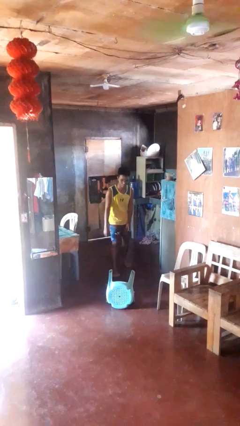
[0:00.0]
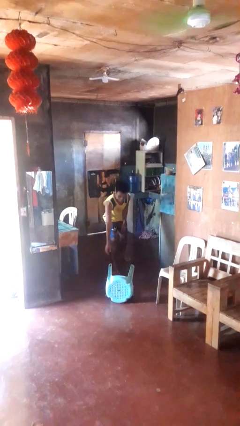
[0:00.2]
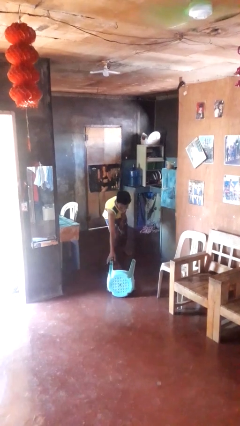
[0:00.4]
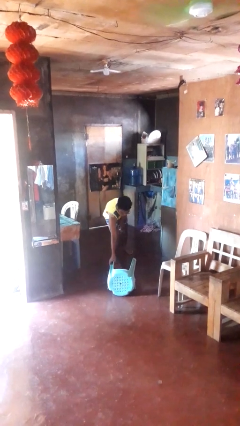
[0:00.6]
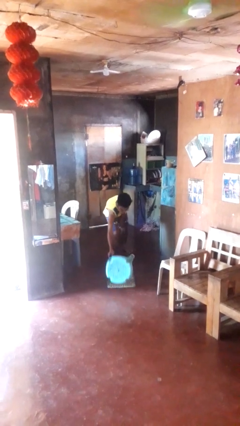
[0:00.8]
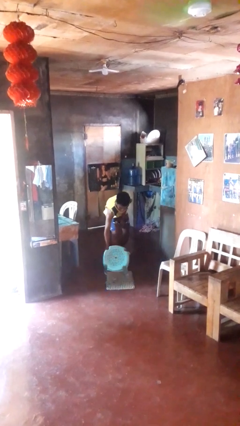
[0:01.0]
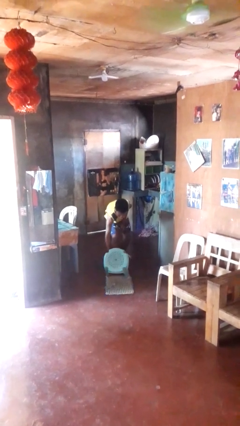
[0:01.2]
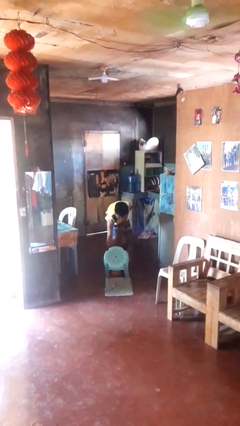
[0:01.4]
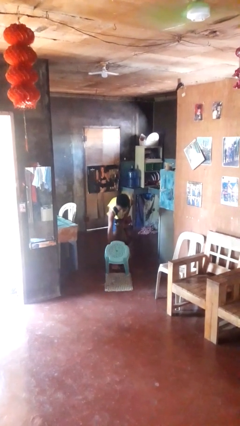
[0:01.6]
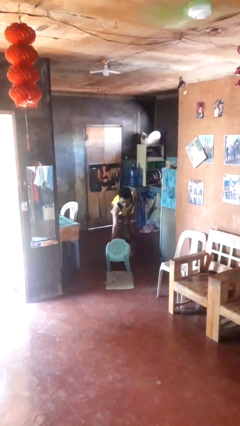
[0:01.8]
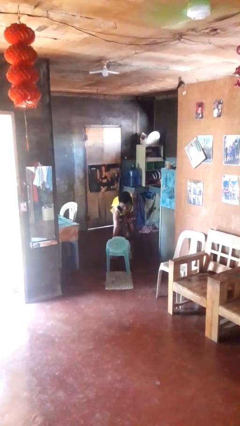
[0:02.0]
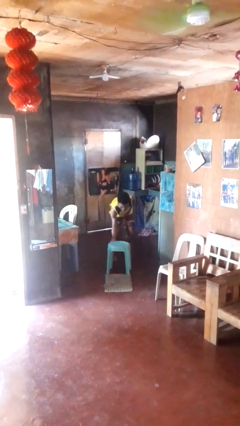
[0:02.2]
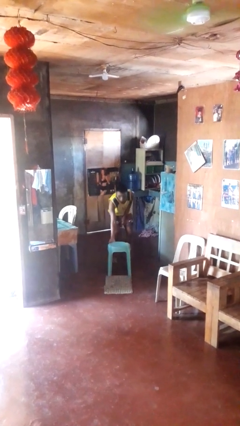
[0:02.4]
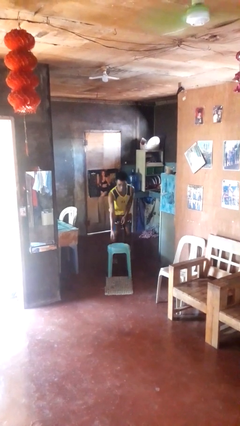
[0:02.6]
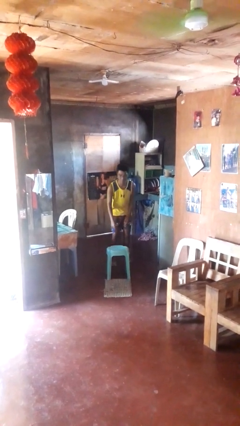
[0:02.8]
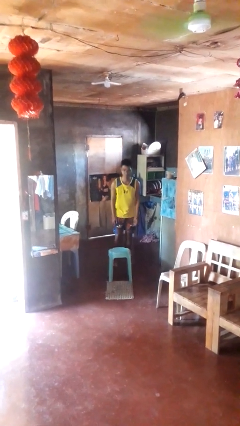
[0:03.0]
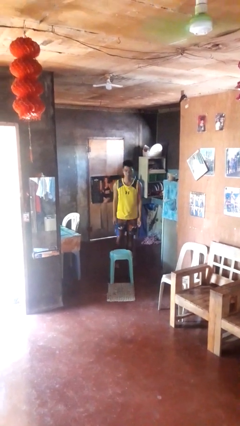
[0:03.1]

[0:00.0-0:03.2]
person sets upright furniture

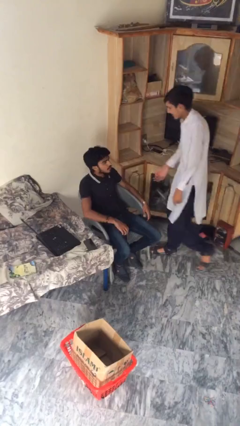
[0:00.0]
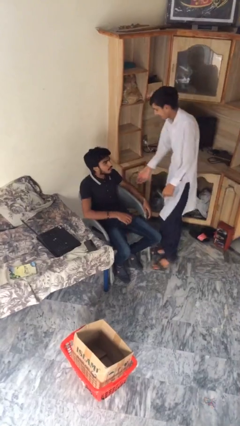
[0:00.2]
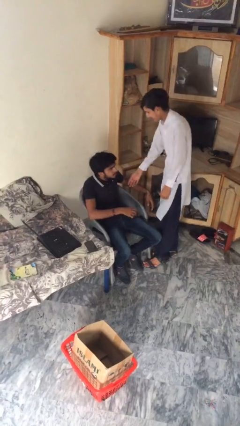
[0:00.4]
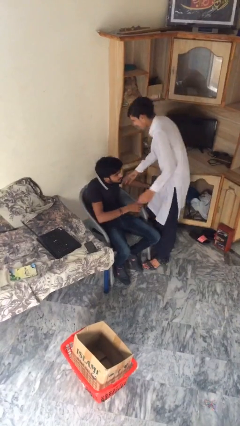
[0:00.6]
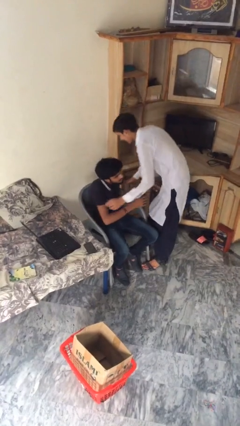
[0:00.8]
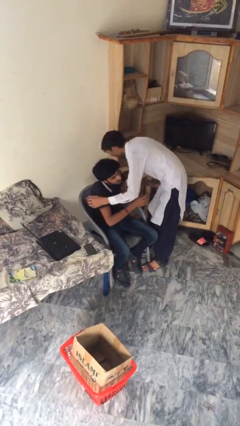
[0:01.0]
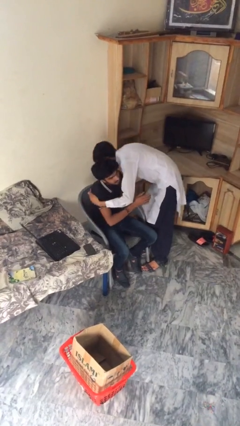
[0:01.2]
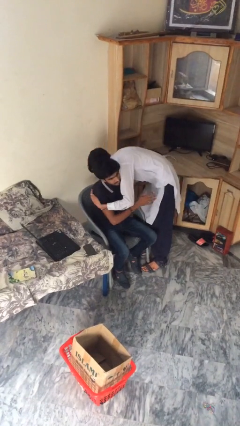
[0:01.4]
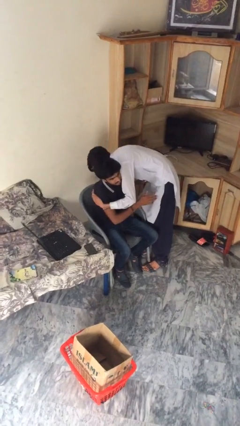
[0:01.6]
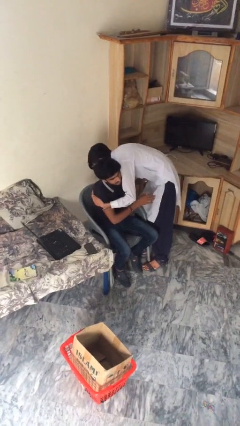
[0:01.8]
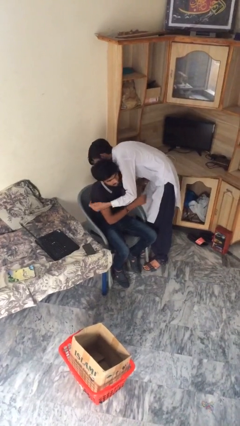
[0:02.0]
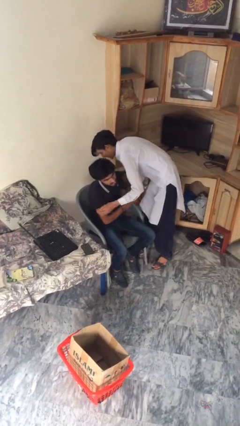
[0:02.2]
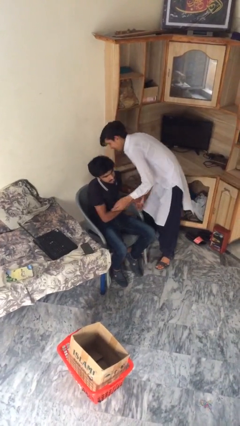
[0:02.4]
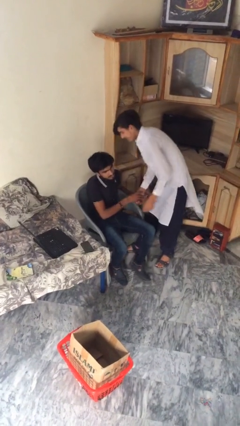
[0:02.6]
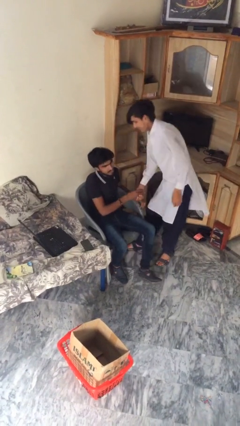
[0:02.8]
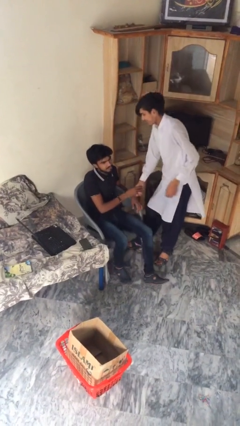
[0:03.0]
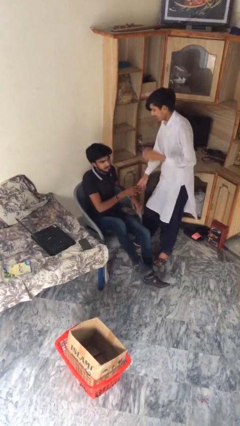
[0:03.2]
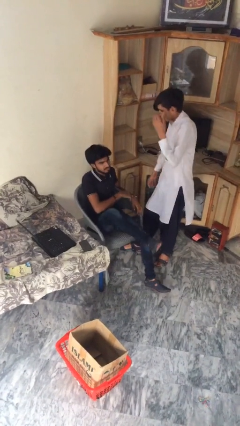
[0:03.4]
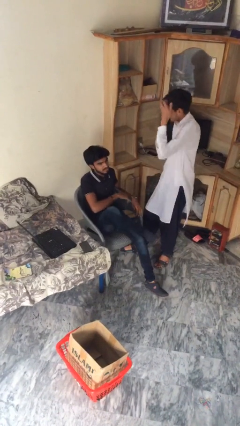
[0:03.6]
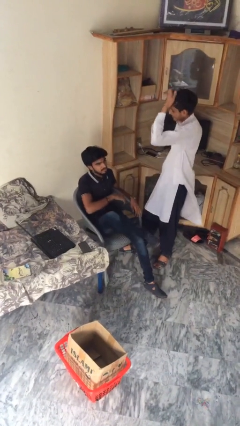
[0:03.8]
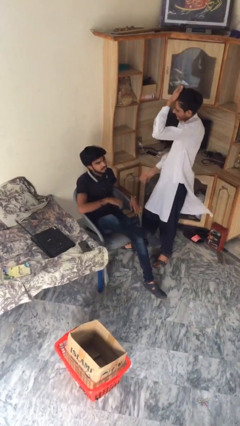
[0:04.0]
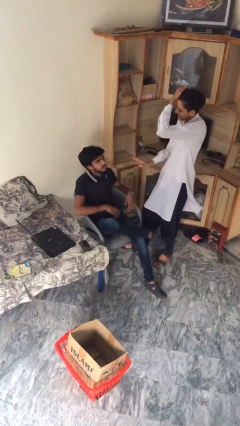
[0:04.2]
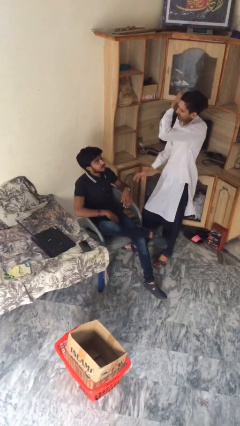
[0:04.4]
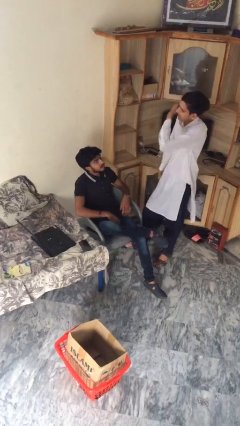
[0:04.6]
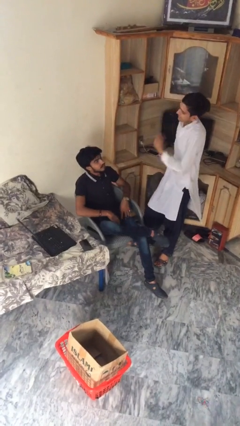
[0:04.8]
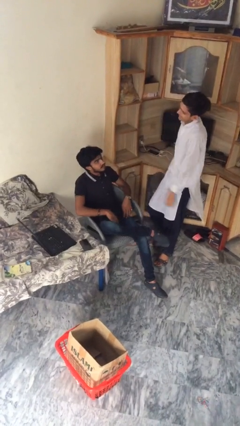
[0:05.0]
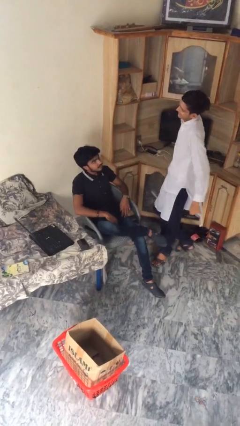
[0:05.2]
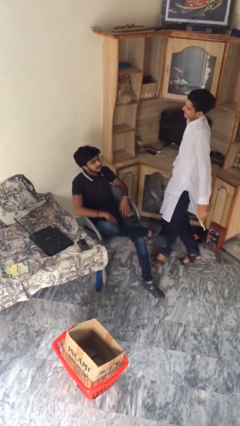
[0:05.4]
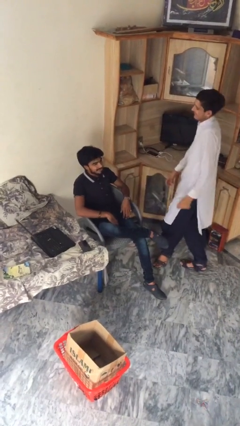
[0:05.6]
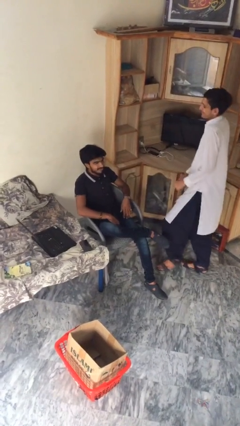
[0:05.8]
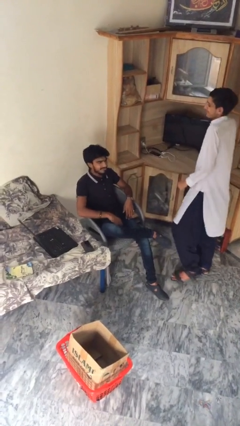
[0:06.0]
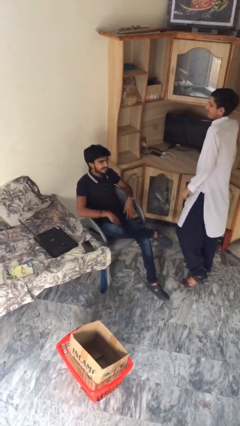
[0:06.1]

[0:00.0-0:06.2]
person embraces person

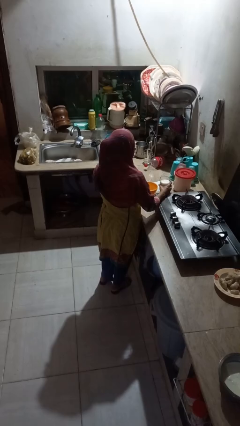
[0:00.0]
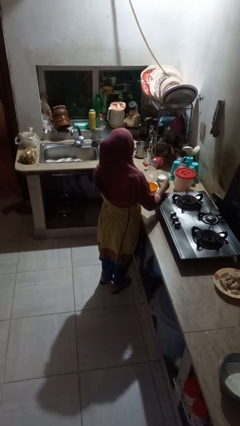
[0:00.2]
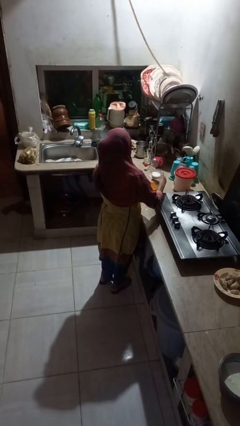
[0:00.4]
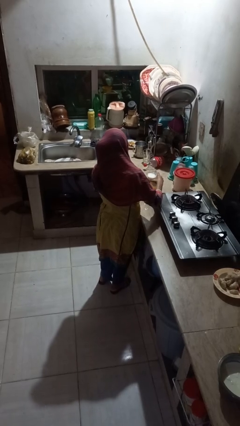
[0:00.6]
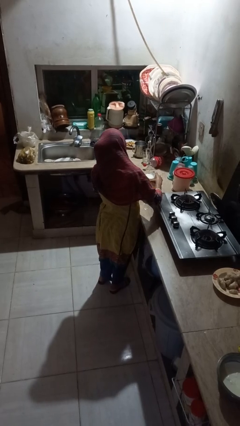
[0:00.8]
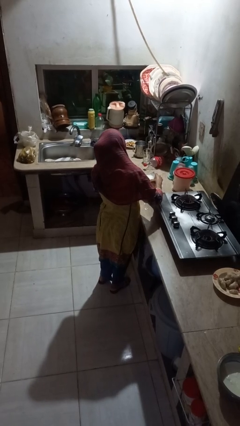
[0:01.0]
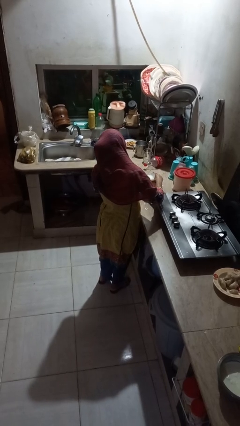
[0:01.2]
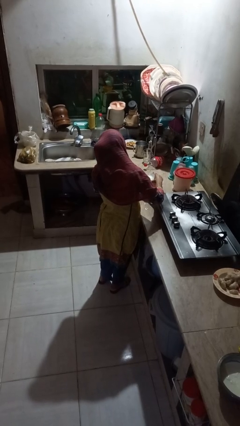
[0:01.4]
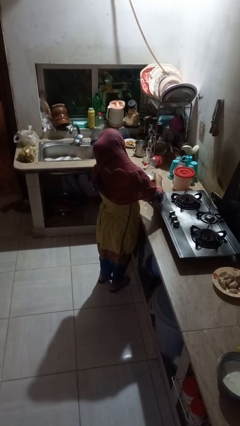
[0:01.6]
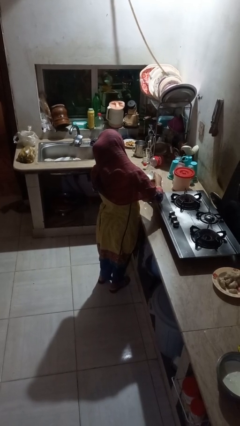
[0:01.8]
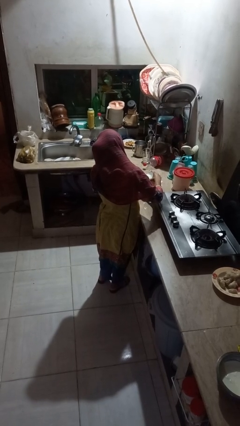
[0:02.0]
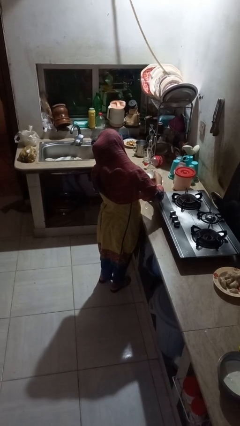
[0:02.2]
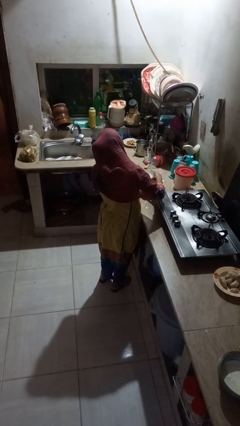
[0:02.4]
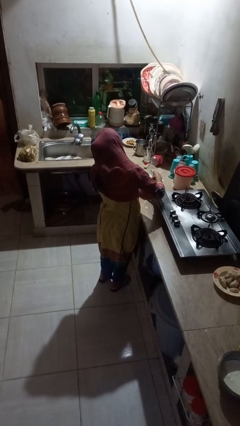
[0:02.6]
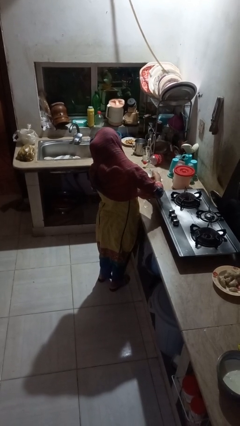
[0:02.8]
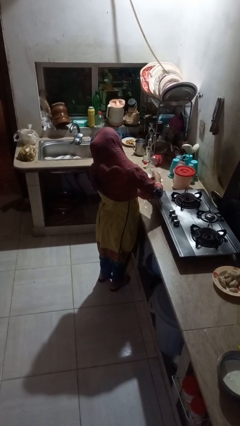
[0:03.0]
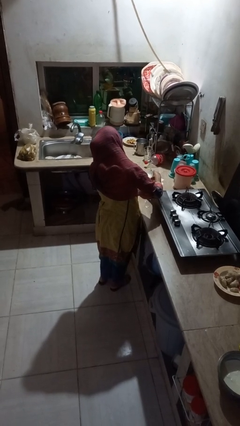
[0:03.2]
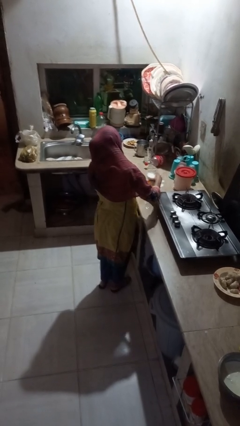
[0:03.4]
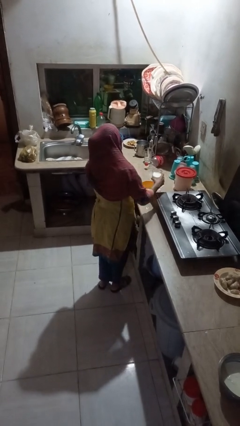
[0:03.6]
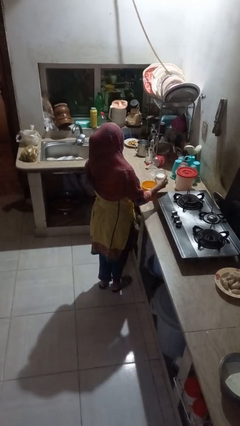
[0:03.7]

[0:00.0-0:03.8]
person pours into bowl

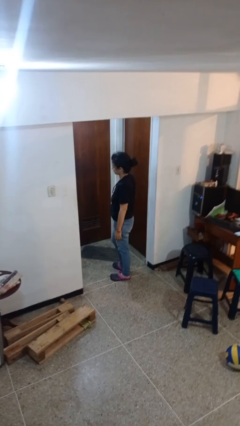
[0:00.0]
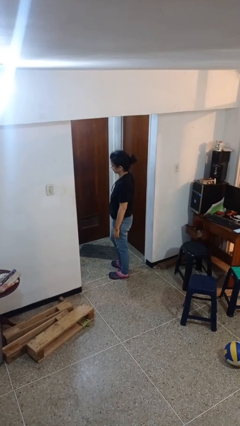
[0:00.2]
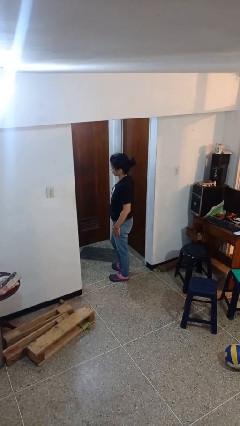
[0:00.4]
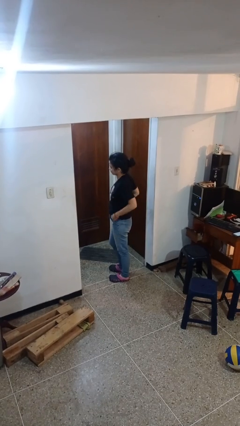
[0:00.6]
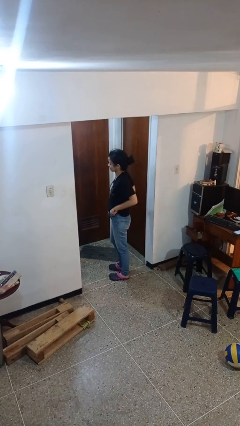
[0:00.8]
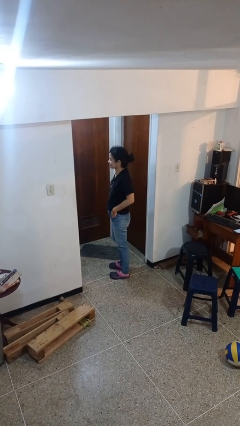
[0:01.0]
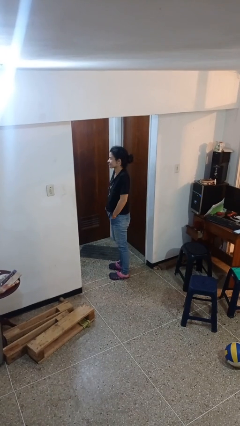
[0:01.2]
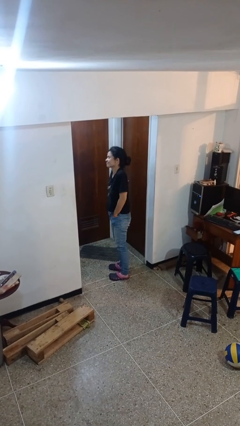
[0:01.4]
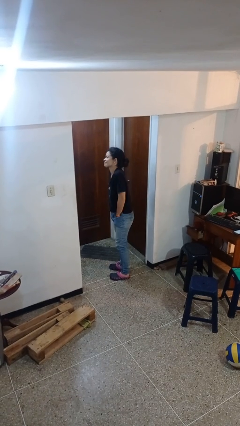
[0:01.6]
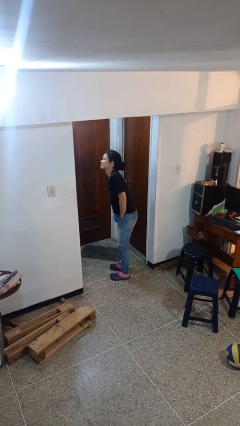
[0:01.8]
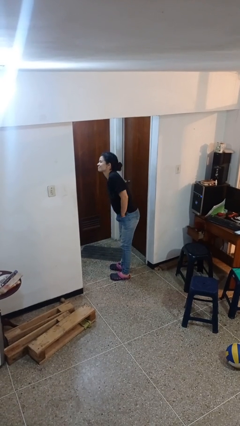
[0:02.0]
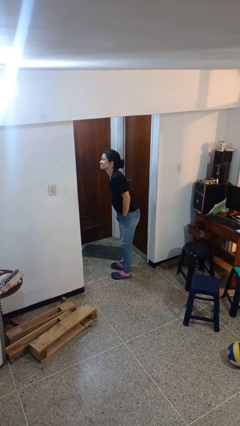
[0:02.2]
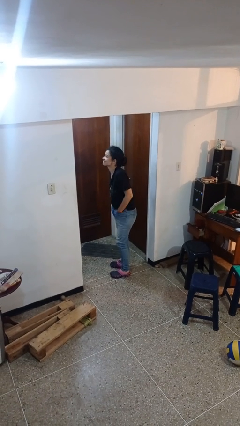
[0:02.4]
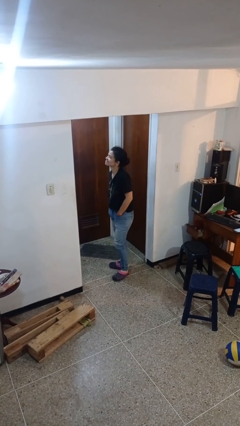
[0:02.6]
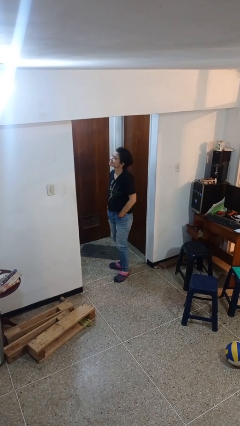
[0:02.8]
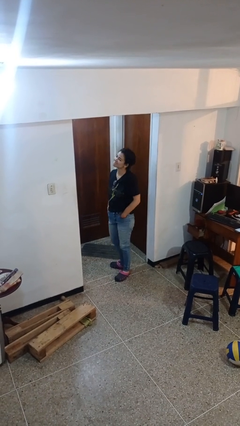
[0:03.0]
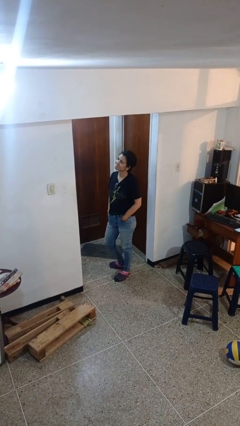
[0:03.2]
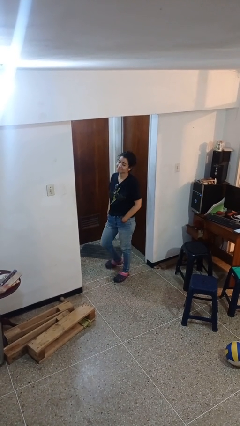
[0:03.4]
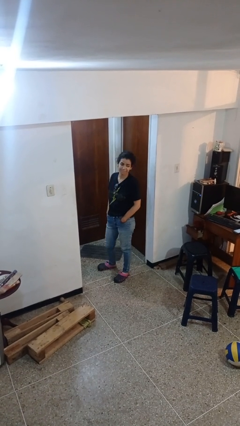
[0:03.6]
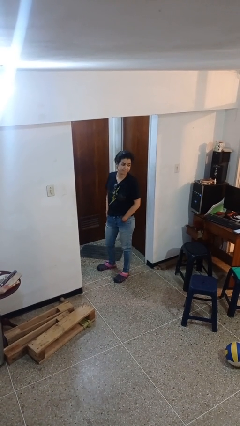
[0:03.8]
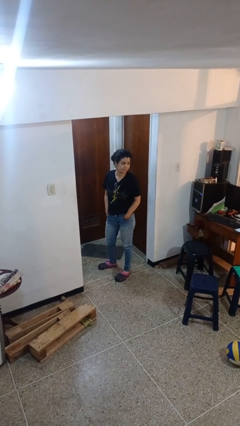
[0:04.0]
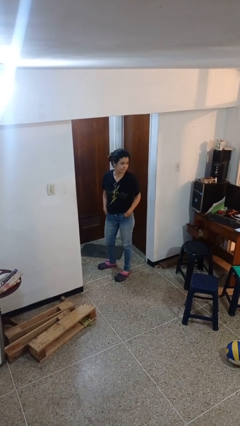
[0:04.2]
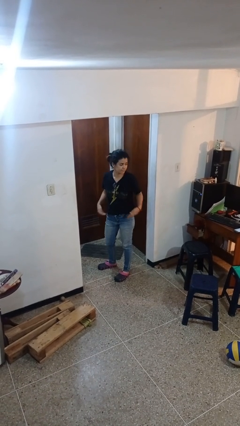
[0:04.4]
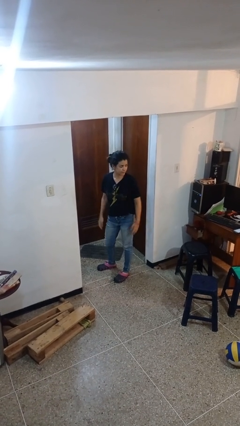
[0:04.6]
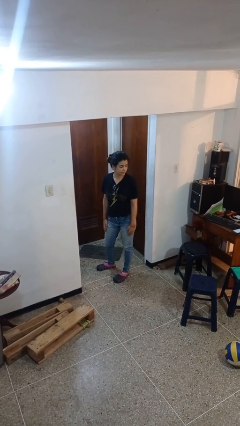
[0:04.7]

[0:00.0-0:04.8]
person puts hands in back pockets

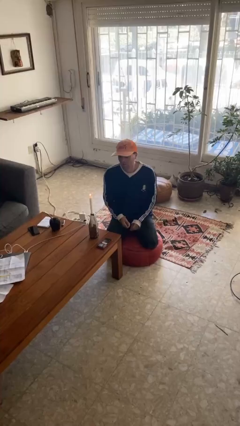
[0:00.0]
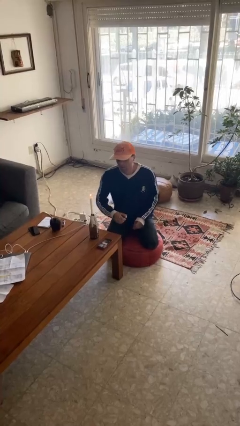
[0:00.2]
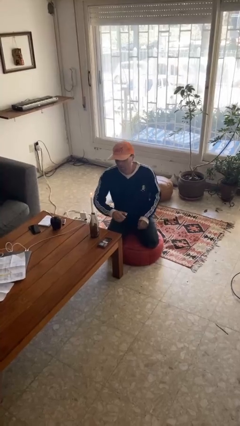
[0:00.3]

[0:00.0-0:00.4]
person lights candle
